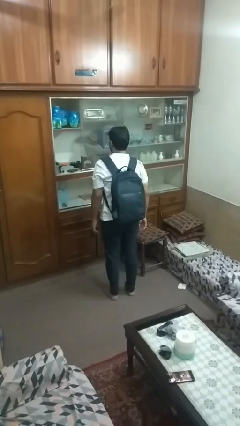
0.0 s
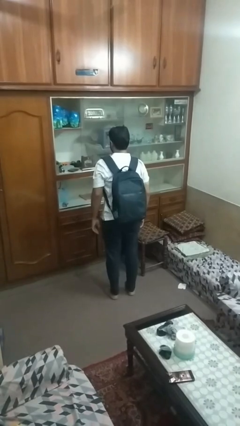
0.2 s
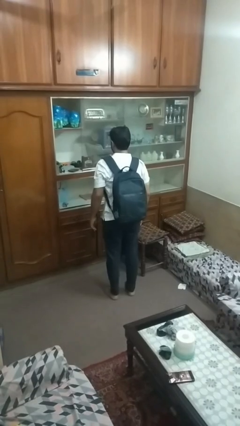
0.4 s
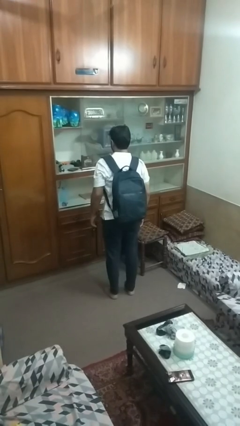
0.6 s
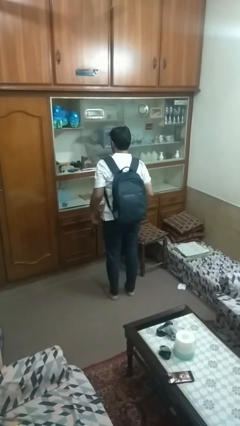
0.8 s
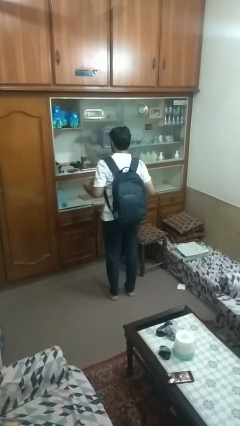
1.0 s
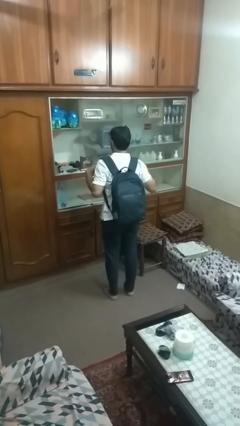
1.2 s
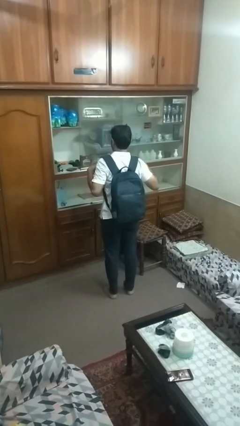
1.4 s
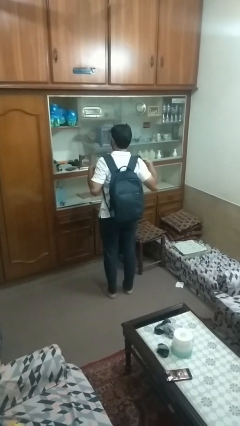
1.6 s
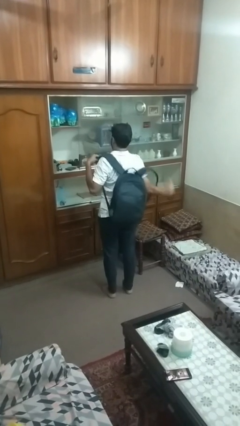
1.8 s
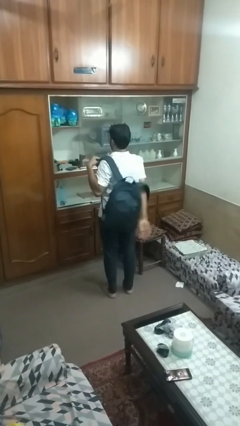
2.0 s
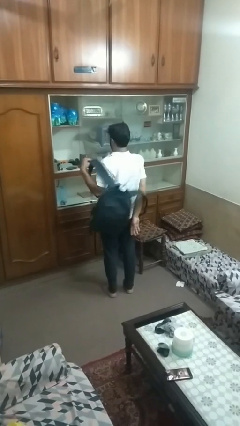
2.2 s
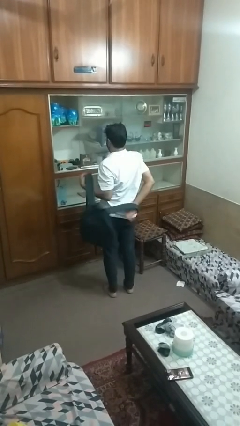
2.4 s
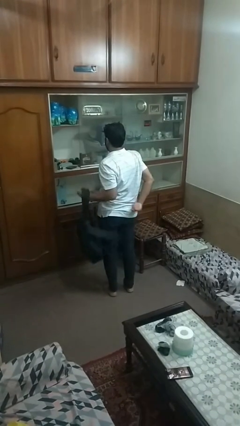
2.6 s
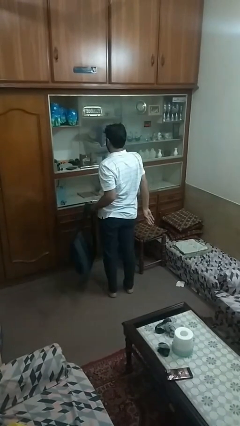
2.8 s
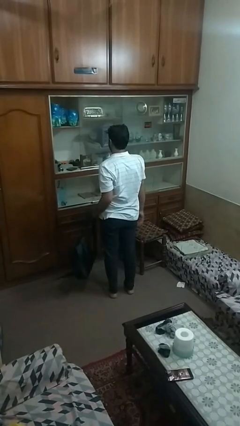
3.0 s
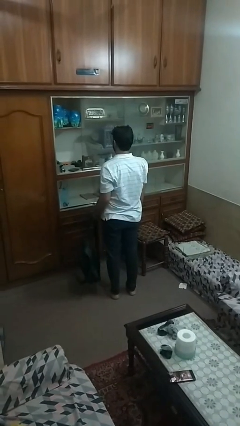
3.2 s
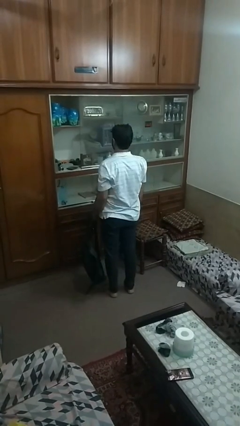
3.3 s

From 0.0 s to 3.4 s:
person takes off backpack

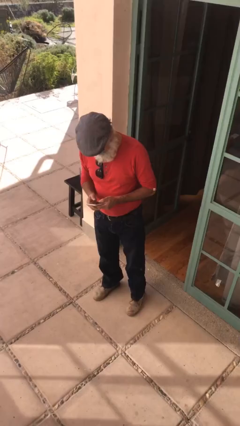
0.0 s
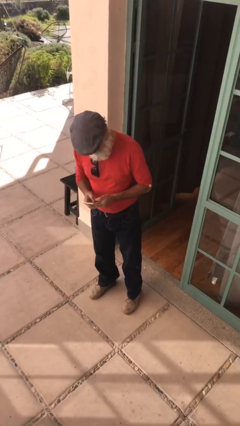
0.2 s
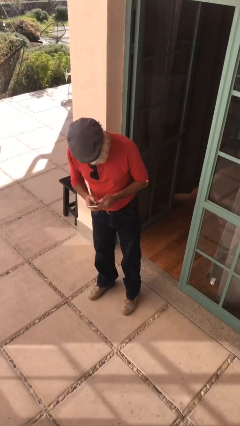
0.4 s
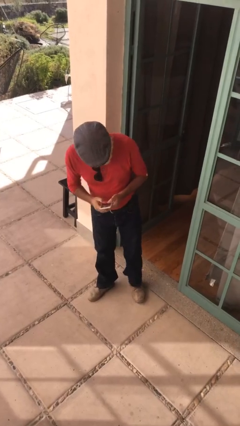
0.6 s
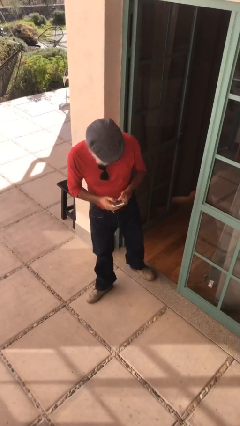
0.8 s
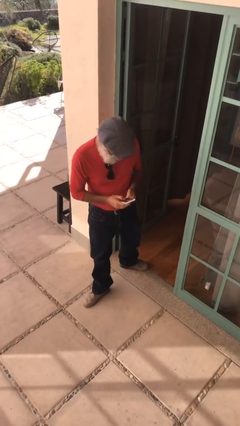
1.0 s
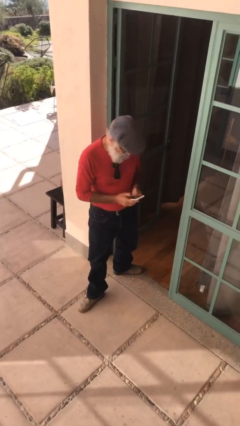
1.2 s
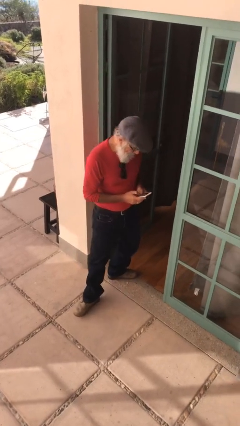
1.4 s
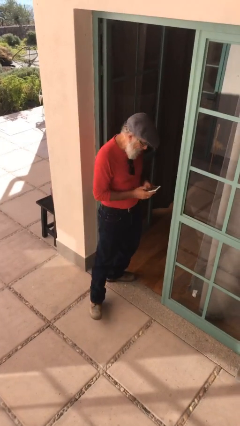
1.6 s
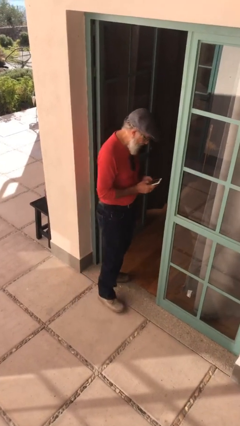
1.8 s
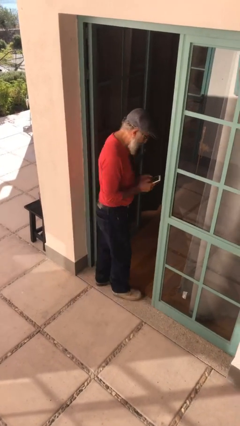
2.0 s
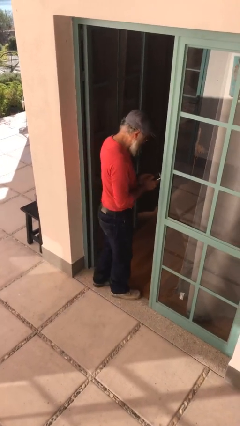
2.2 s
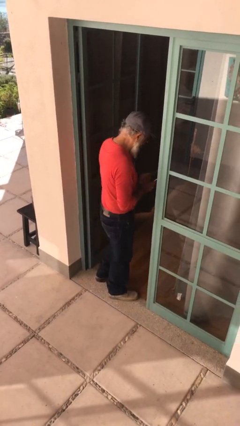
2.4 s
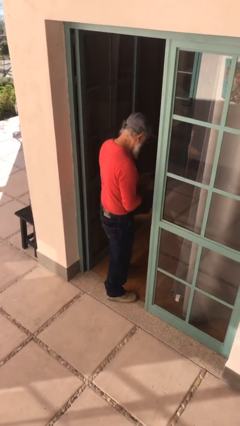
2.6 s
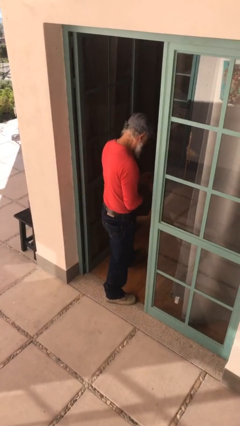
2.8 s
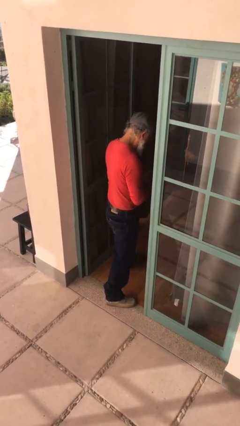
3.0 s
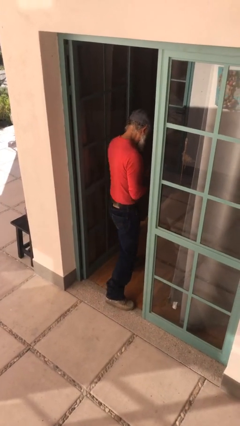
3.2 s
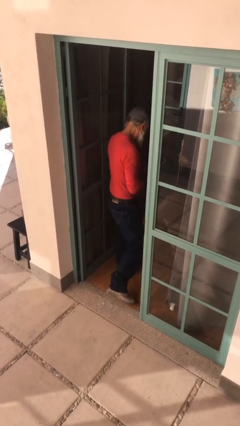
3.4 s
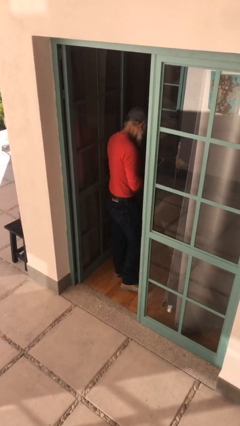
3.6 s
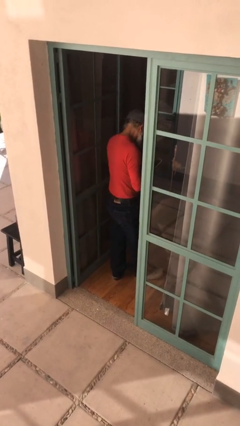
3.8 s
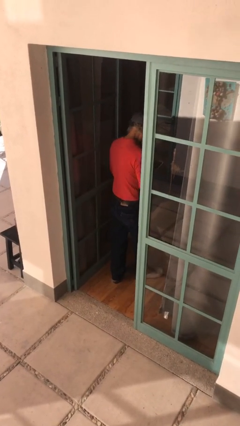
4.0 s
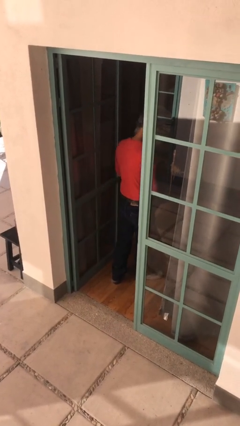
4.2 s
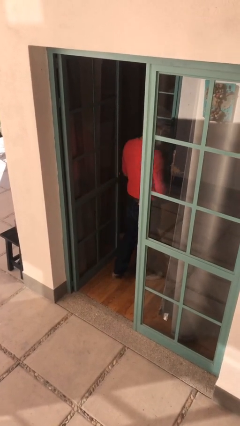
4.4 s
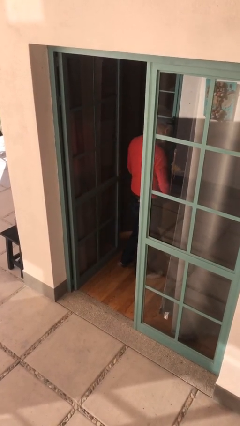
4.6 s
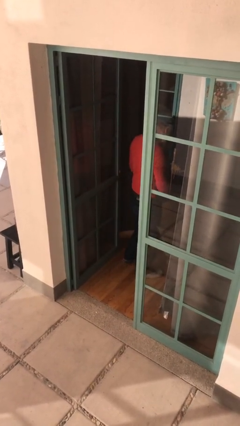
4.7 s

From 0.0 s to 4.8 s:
person exits scene through structure

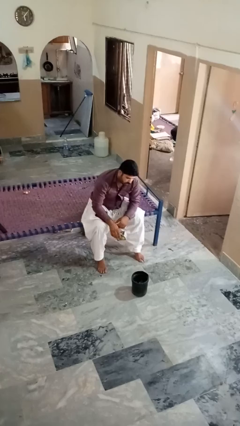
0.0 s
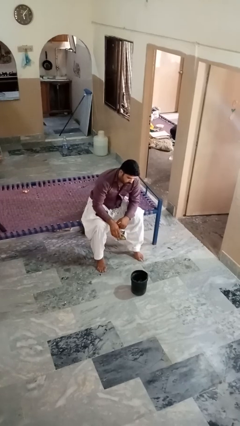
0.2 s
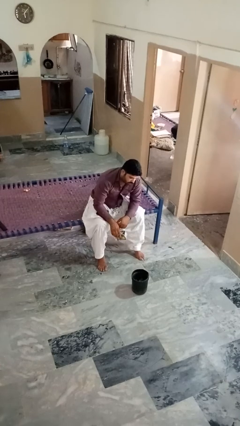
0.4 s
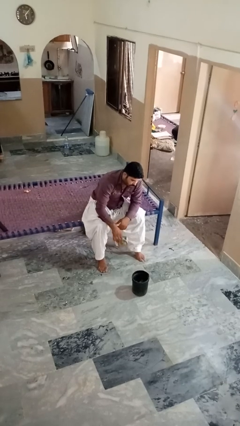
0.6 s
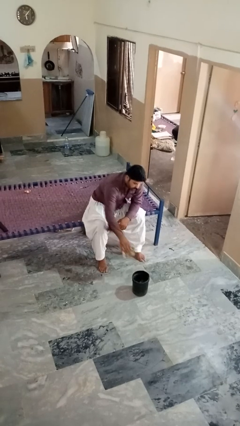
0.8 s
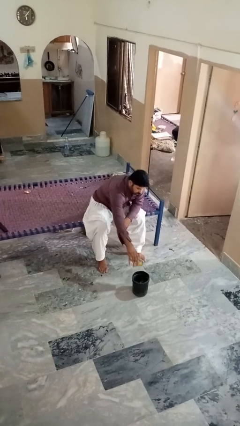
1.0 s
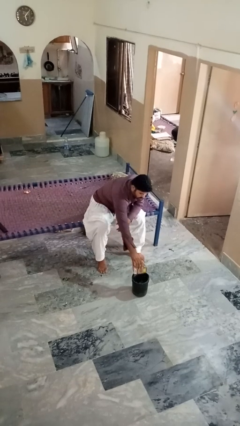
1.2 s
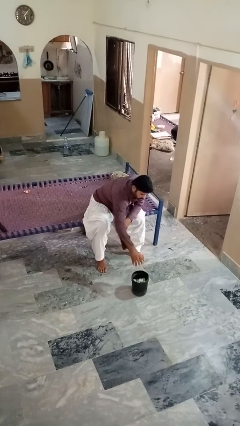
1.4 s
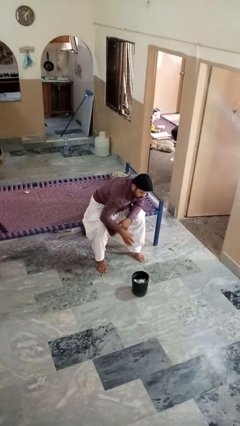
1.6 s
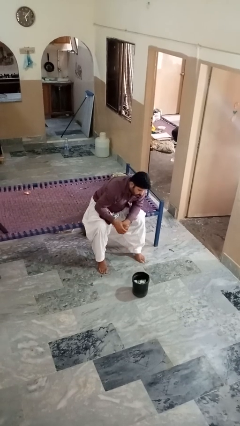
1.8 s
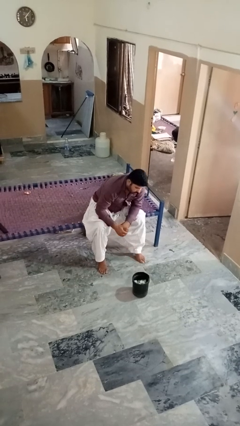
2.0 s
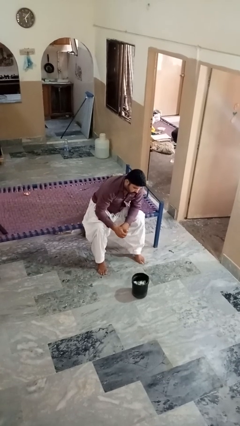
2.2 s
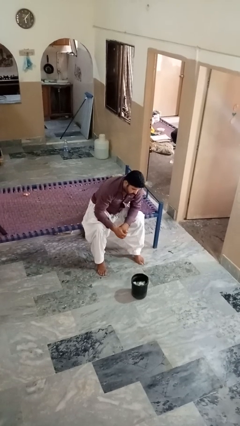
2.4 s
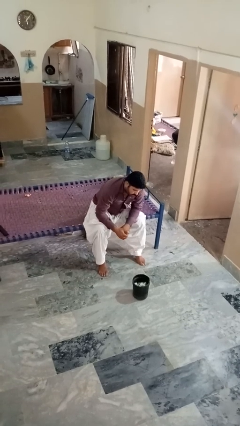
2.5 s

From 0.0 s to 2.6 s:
person puts object into basket

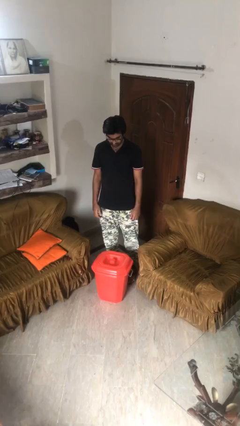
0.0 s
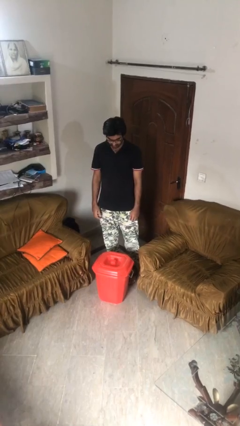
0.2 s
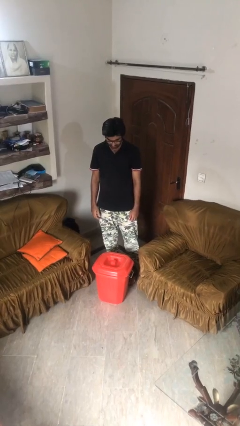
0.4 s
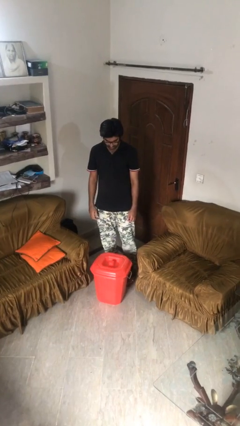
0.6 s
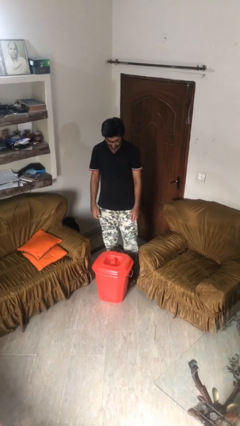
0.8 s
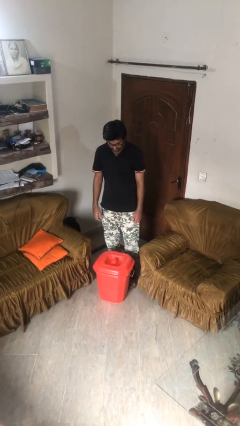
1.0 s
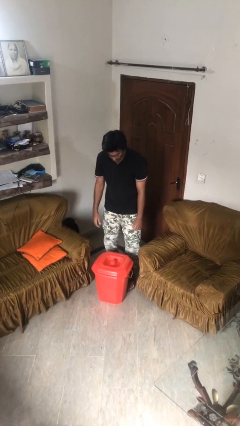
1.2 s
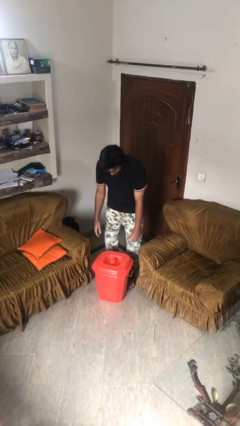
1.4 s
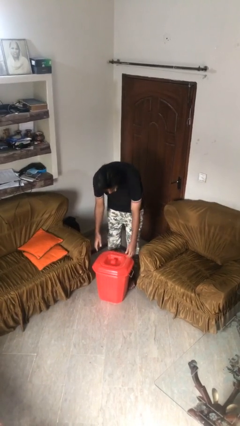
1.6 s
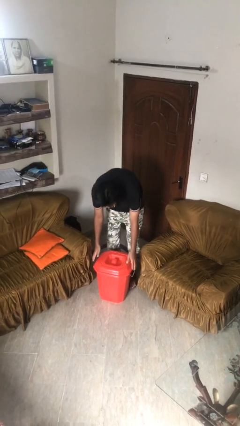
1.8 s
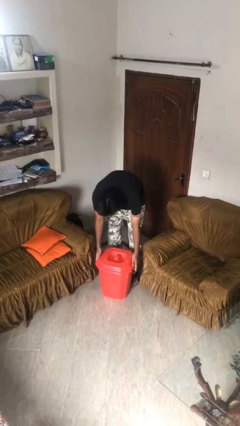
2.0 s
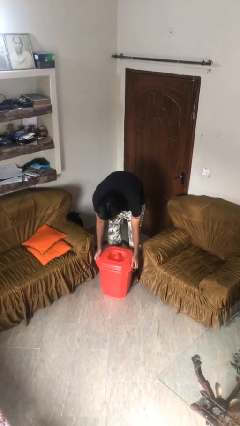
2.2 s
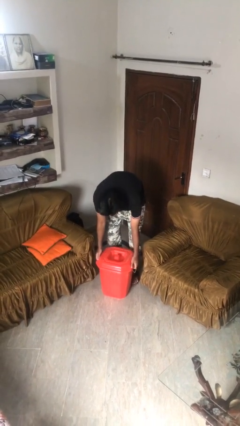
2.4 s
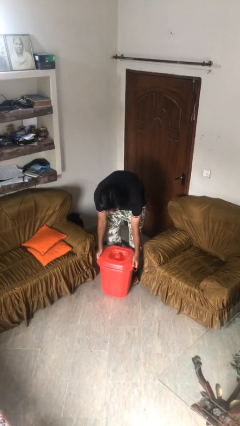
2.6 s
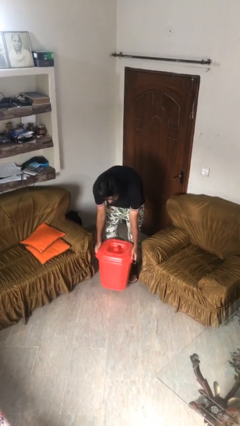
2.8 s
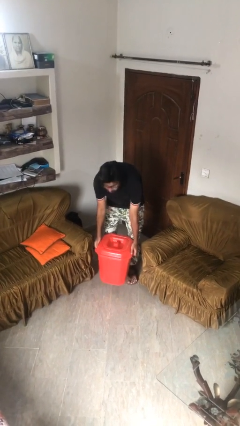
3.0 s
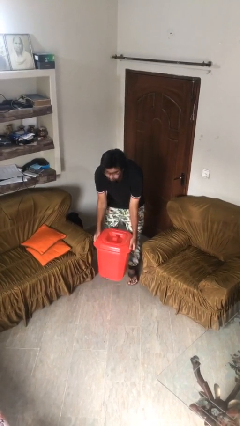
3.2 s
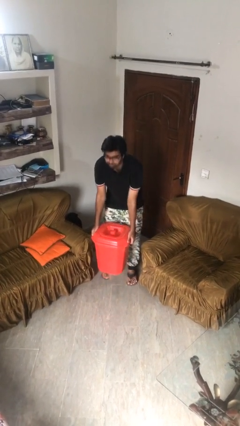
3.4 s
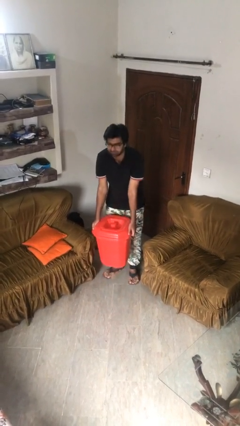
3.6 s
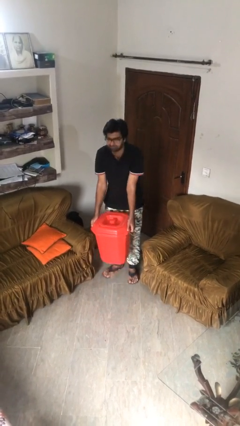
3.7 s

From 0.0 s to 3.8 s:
person picks up object from floor

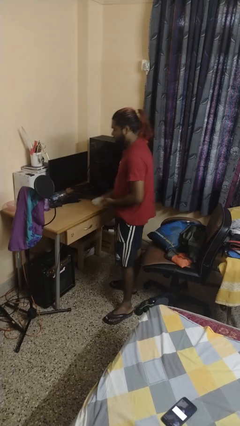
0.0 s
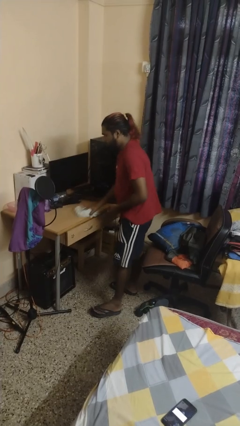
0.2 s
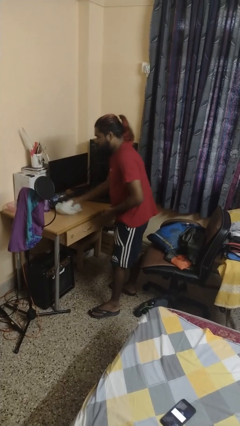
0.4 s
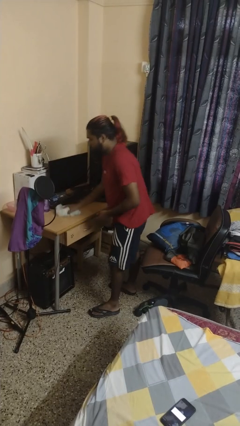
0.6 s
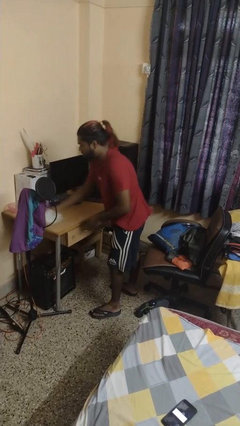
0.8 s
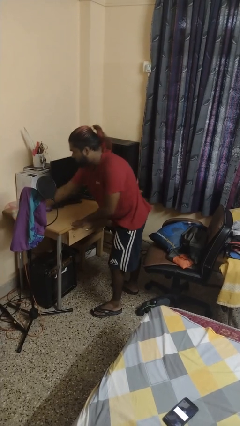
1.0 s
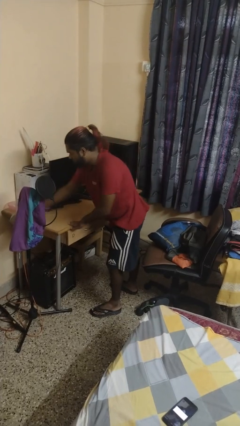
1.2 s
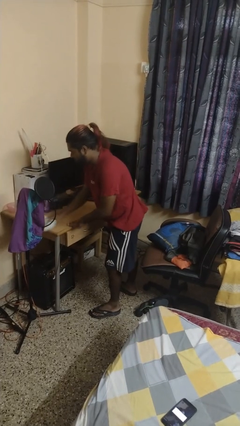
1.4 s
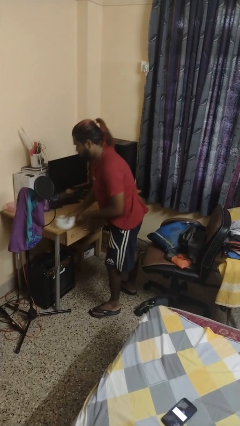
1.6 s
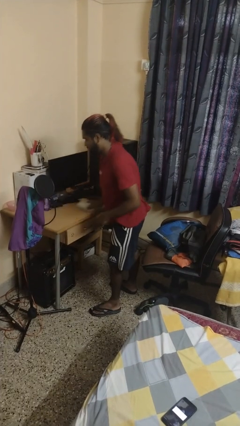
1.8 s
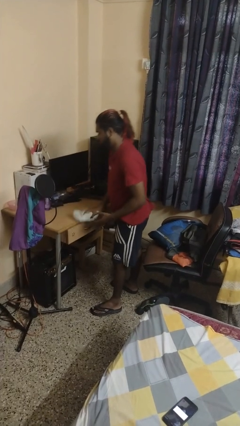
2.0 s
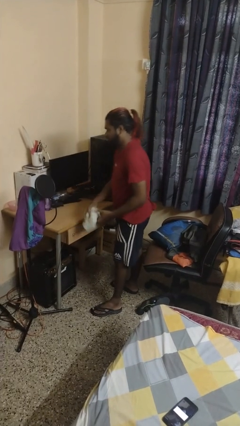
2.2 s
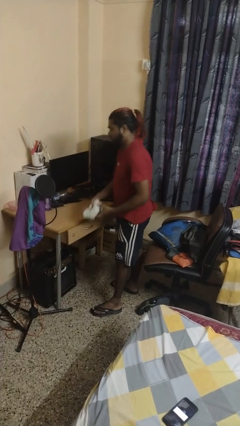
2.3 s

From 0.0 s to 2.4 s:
person cleans table with rag

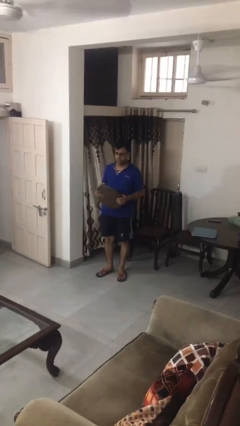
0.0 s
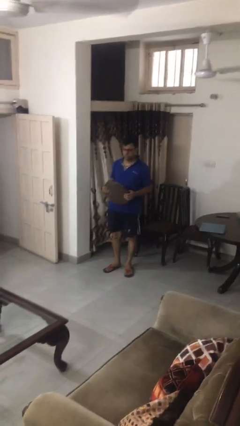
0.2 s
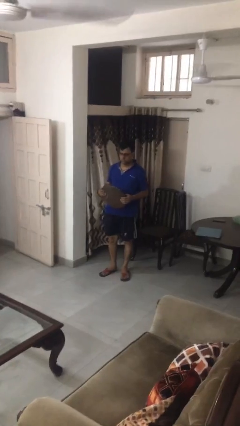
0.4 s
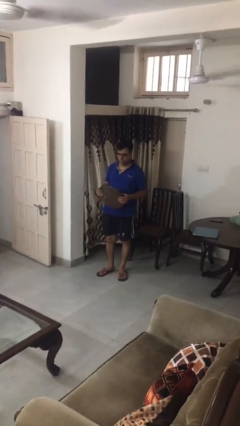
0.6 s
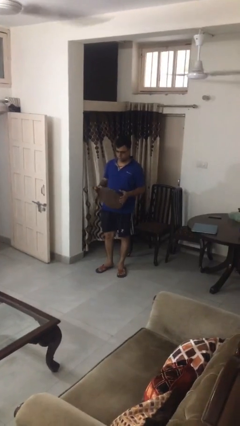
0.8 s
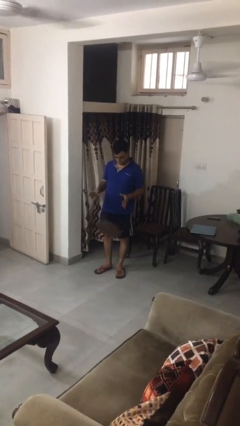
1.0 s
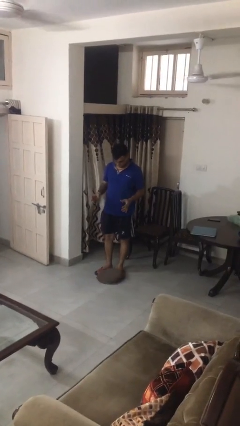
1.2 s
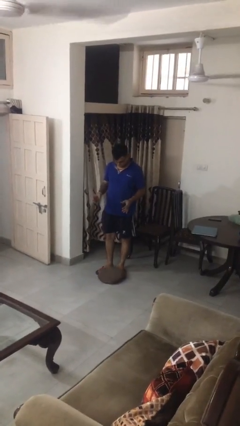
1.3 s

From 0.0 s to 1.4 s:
person drops object
